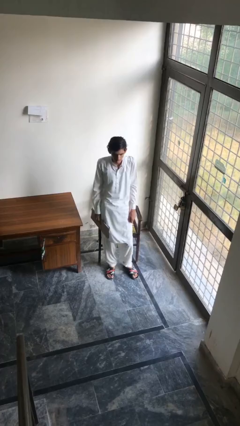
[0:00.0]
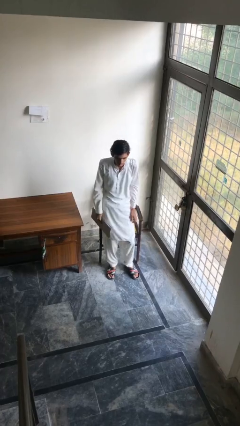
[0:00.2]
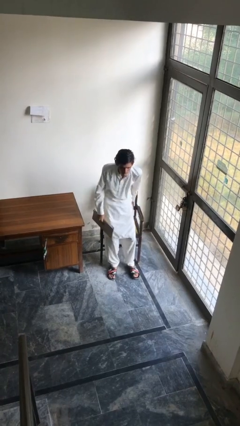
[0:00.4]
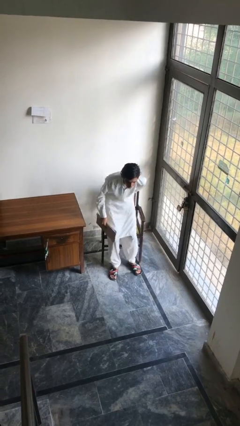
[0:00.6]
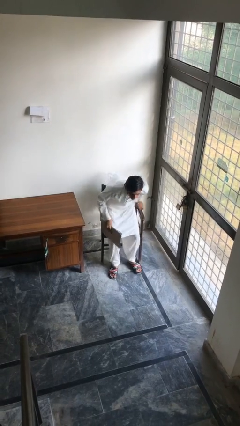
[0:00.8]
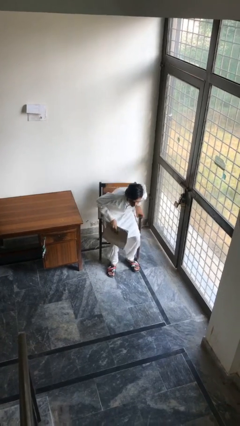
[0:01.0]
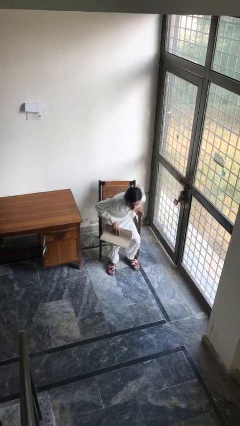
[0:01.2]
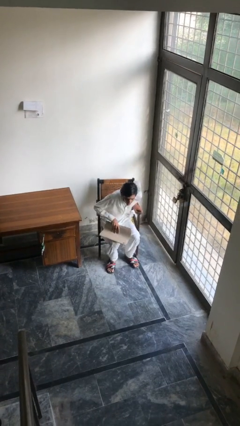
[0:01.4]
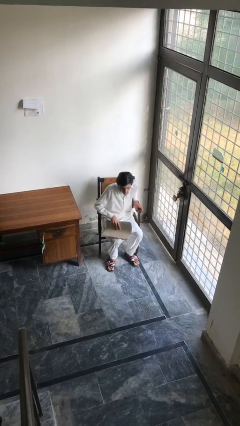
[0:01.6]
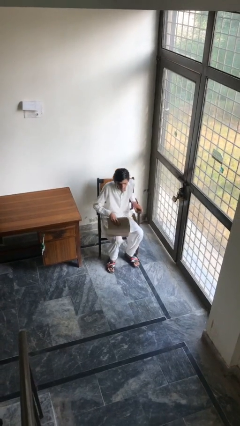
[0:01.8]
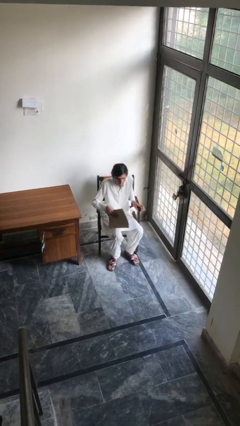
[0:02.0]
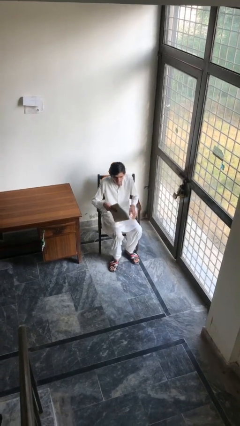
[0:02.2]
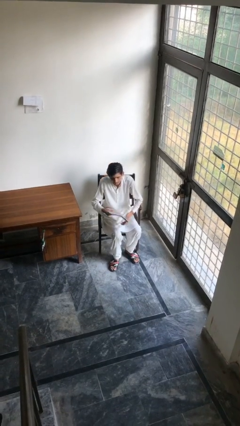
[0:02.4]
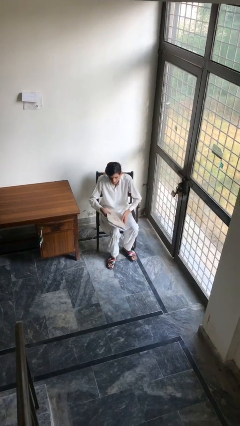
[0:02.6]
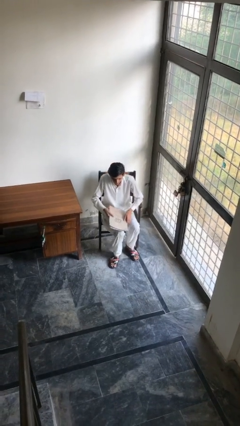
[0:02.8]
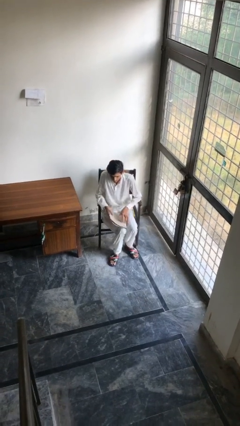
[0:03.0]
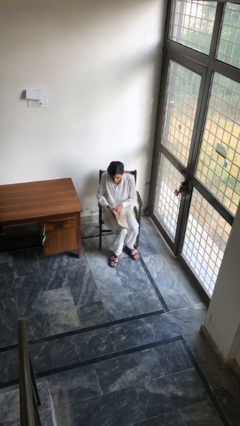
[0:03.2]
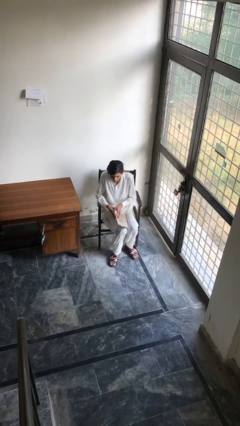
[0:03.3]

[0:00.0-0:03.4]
person sits down

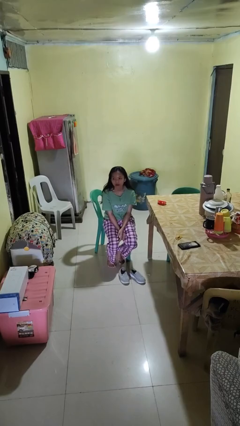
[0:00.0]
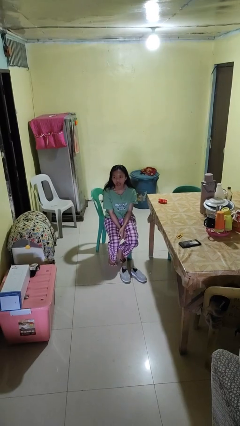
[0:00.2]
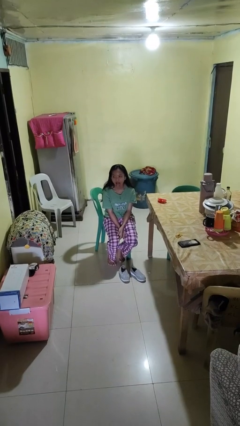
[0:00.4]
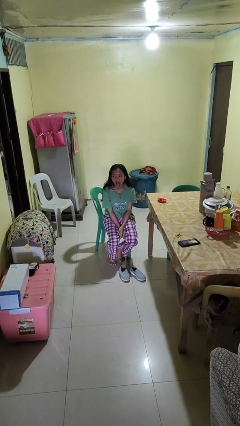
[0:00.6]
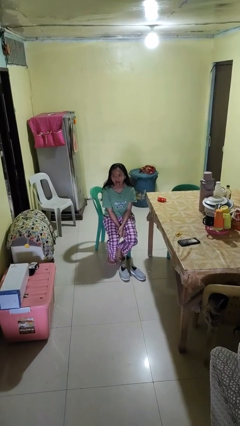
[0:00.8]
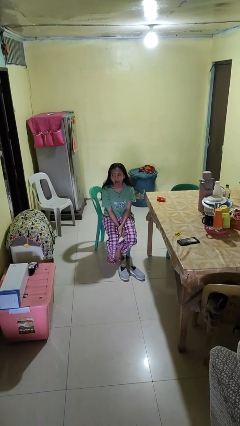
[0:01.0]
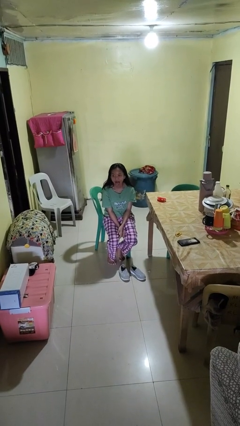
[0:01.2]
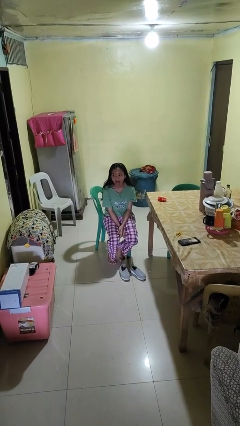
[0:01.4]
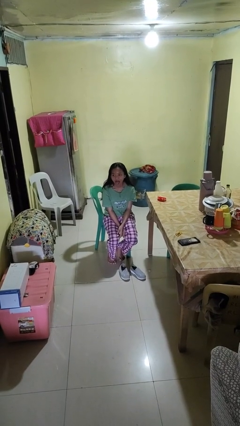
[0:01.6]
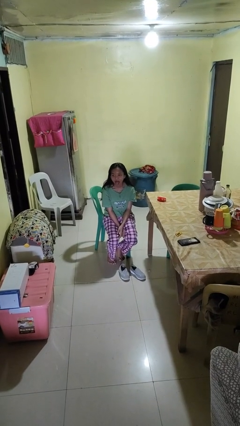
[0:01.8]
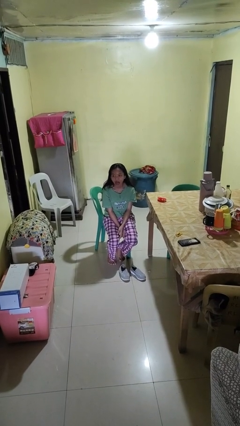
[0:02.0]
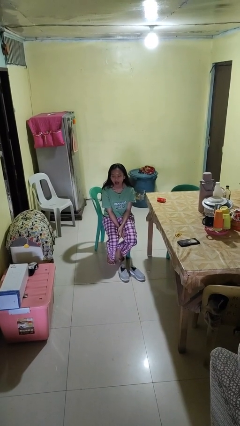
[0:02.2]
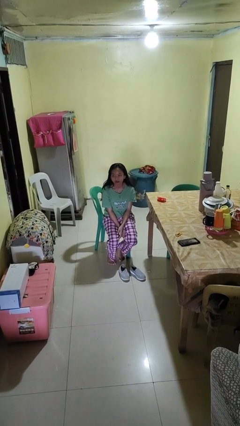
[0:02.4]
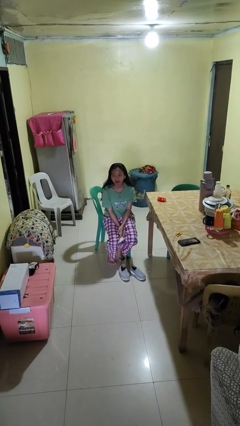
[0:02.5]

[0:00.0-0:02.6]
person sticks out tongue

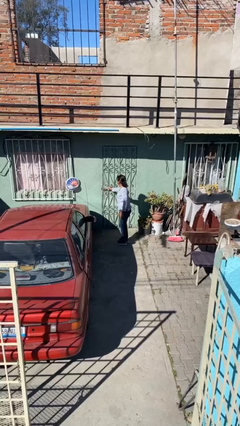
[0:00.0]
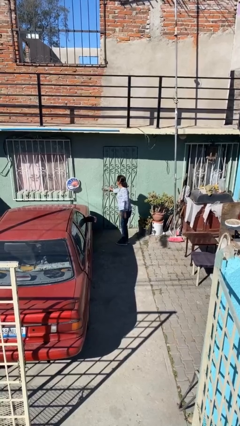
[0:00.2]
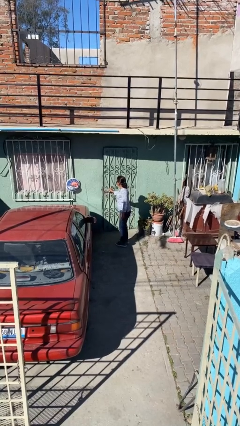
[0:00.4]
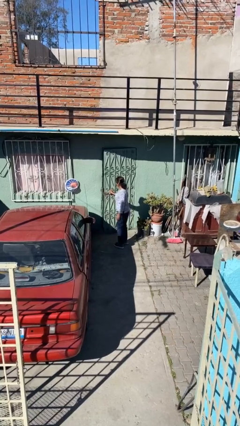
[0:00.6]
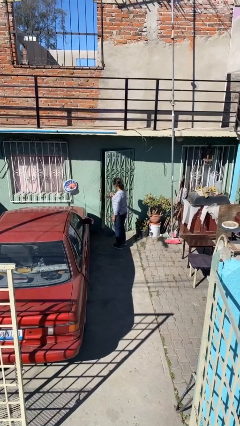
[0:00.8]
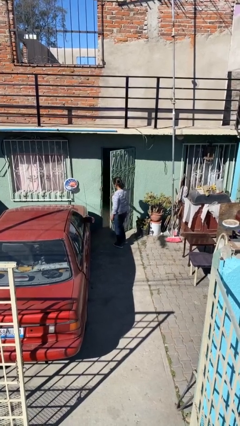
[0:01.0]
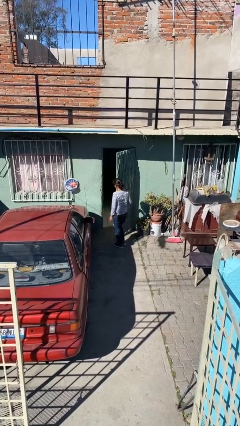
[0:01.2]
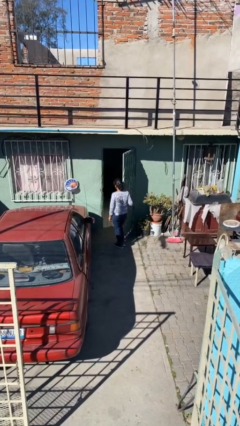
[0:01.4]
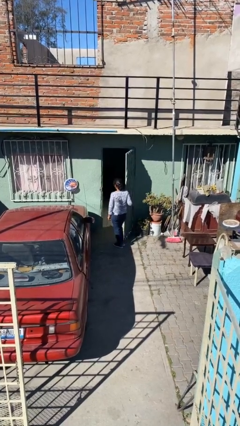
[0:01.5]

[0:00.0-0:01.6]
person opens facility door

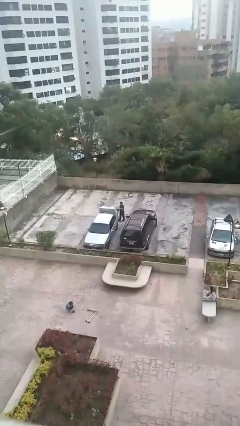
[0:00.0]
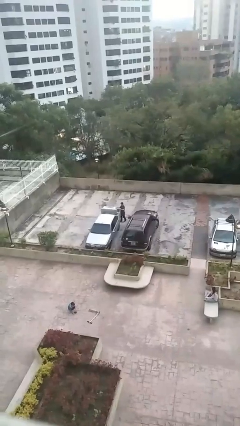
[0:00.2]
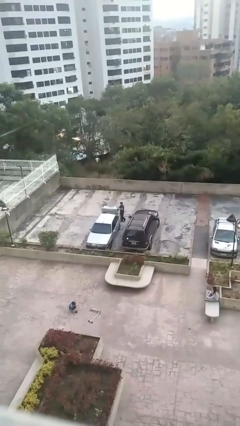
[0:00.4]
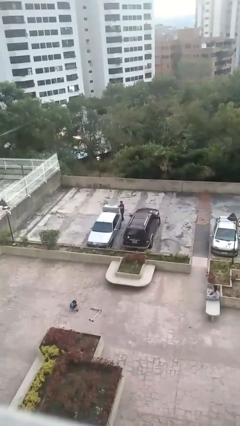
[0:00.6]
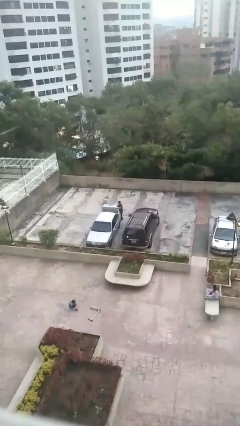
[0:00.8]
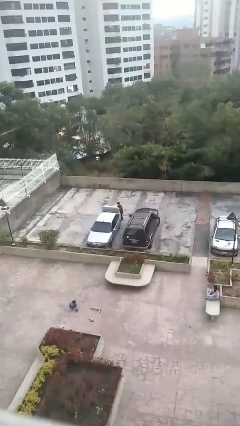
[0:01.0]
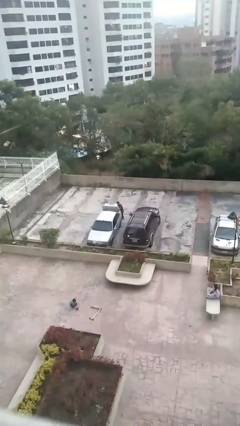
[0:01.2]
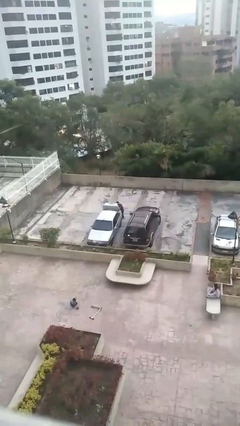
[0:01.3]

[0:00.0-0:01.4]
person loads car

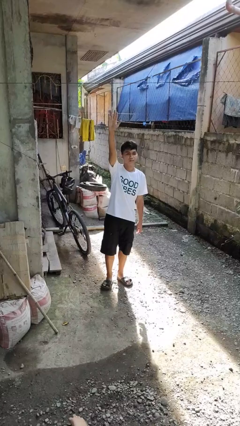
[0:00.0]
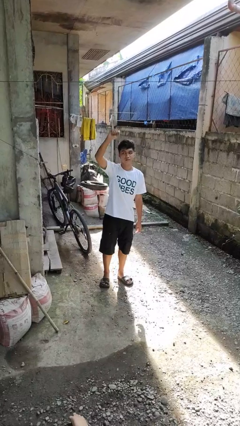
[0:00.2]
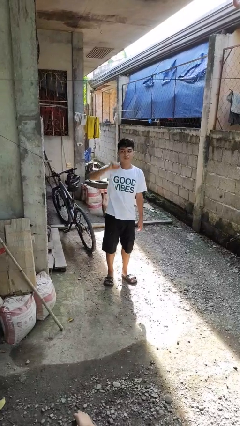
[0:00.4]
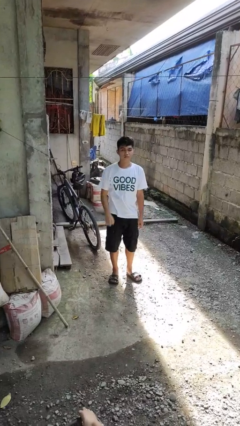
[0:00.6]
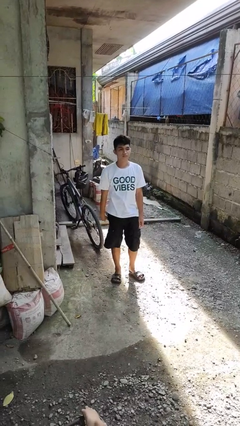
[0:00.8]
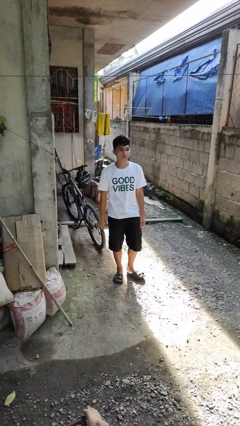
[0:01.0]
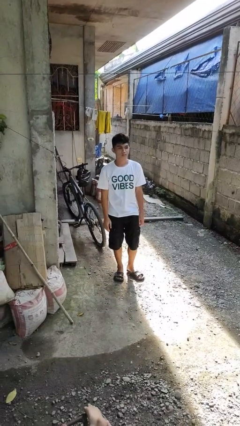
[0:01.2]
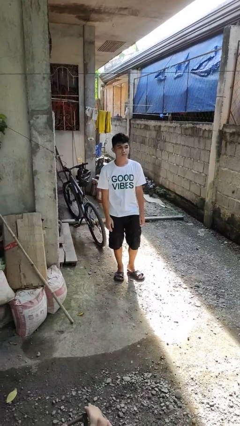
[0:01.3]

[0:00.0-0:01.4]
person gestures lower hand

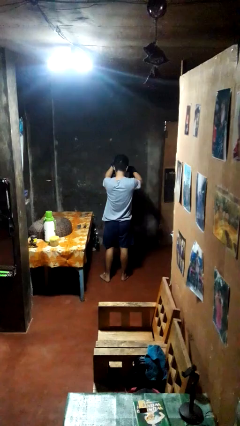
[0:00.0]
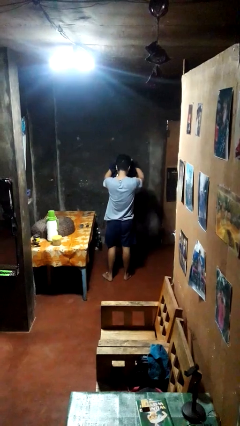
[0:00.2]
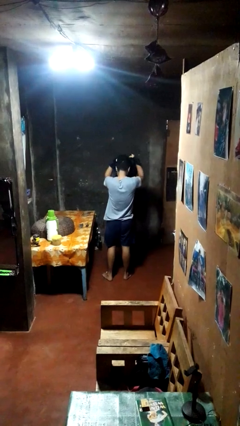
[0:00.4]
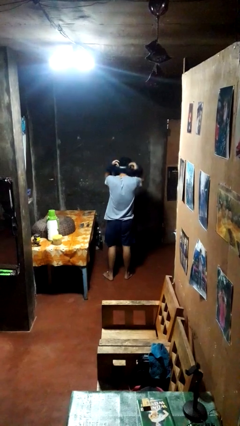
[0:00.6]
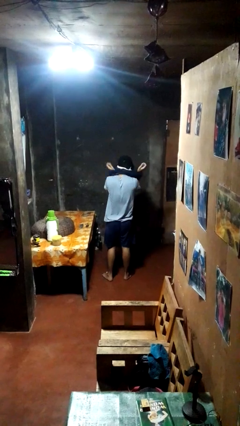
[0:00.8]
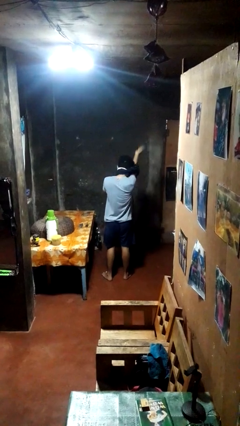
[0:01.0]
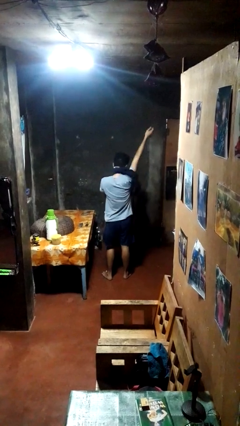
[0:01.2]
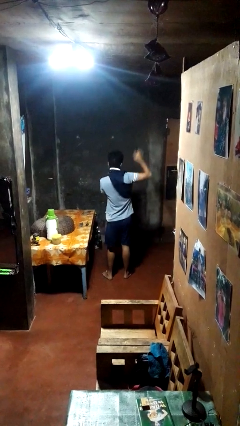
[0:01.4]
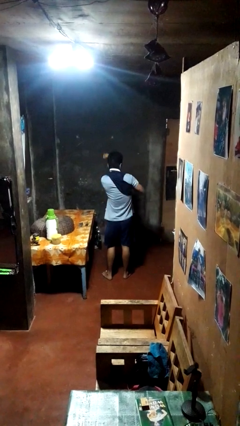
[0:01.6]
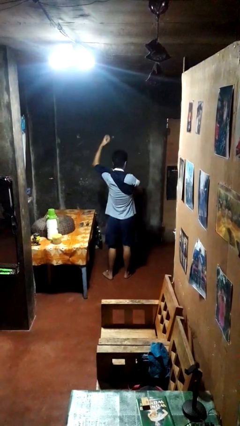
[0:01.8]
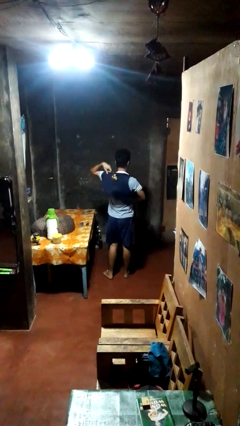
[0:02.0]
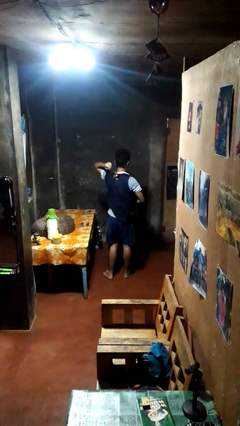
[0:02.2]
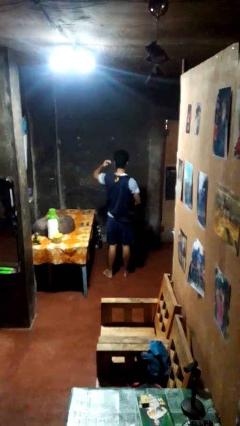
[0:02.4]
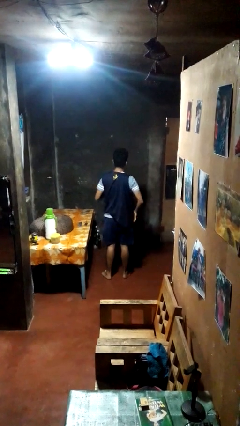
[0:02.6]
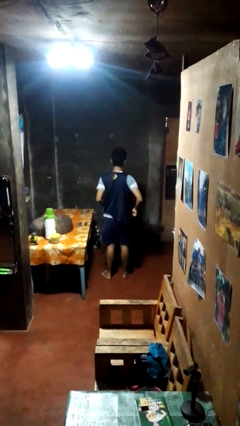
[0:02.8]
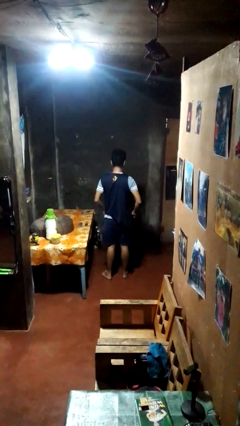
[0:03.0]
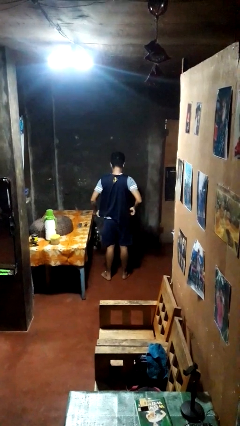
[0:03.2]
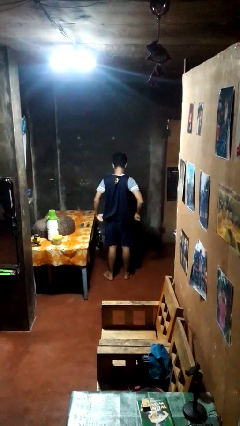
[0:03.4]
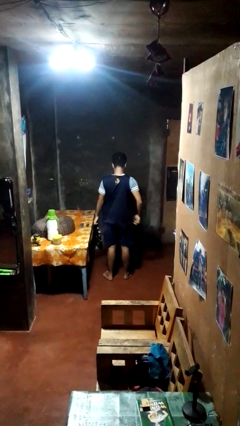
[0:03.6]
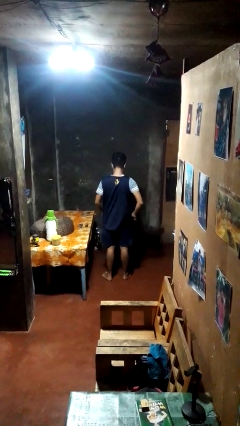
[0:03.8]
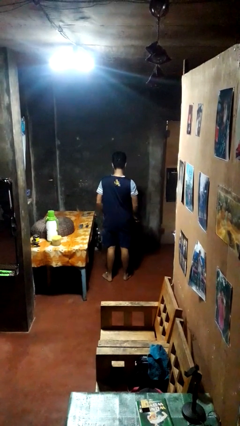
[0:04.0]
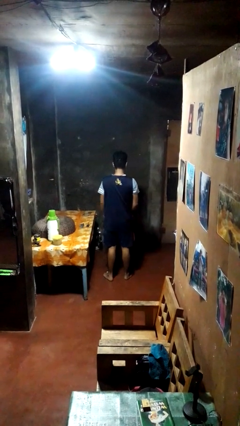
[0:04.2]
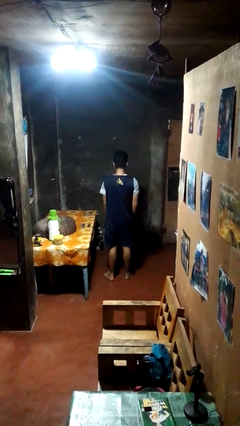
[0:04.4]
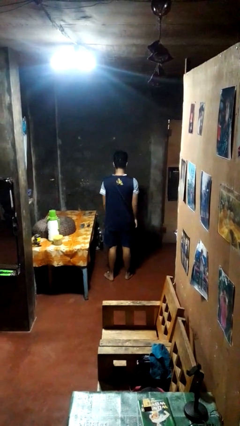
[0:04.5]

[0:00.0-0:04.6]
person puts on shirt

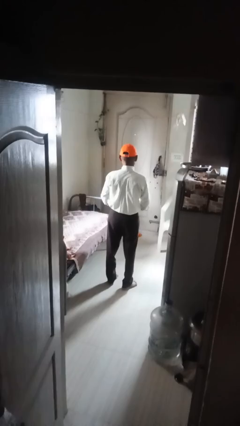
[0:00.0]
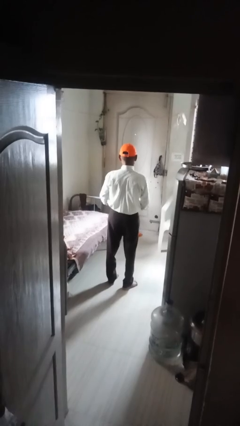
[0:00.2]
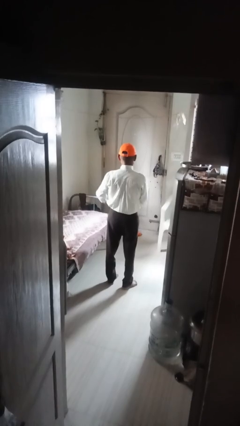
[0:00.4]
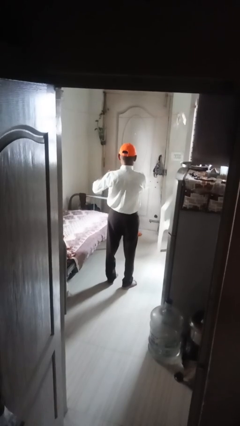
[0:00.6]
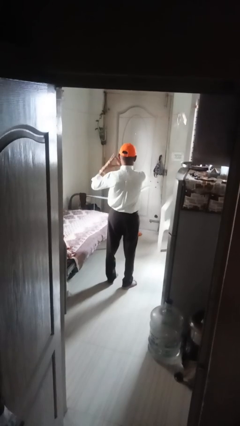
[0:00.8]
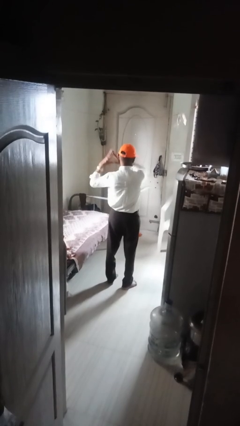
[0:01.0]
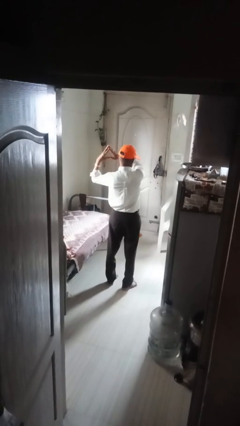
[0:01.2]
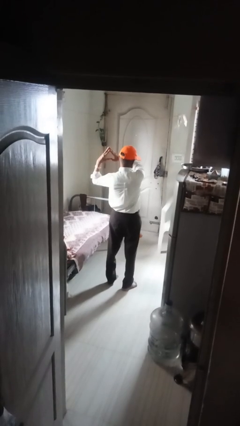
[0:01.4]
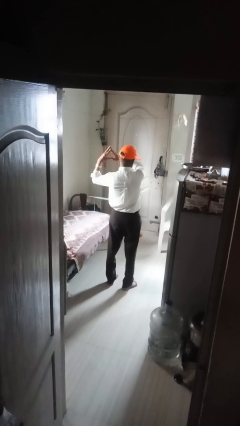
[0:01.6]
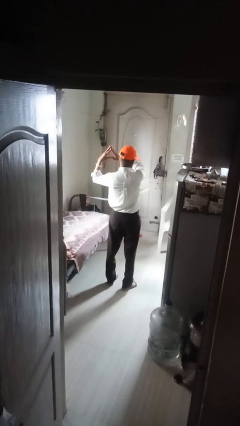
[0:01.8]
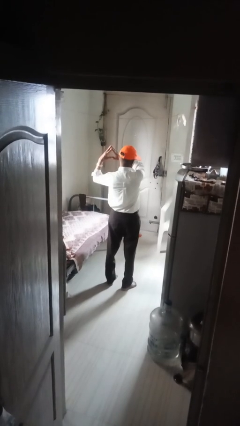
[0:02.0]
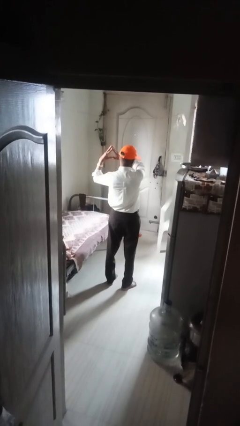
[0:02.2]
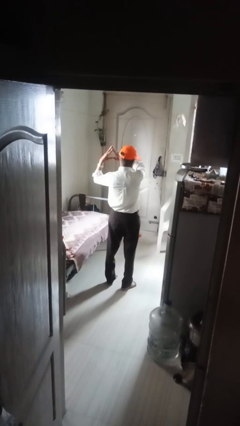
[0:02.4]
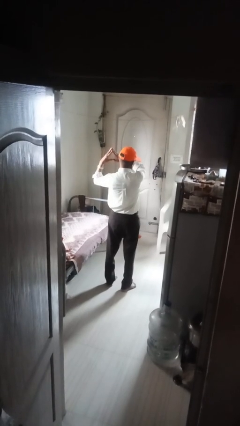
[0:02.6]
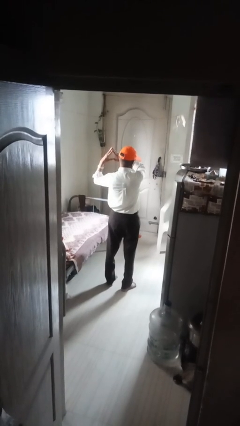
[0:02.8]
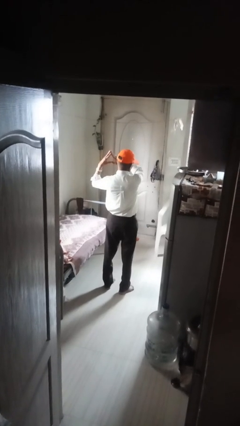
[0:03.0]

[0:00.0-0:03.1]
person gestures heart
